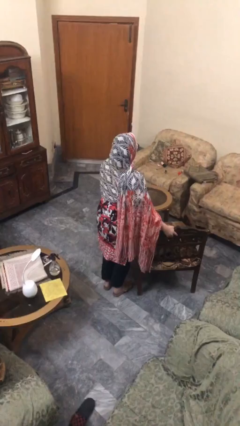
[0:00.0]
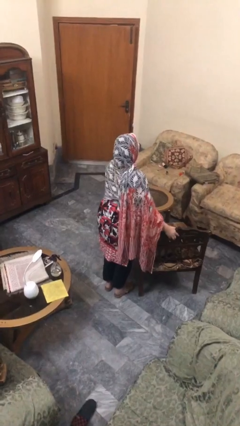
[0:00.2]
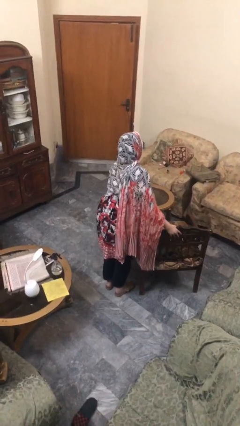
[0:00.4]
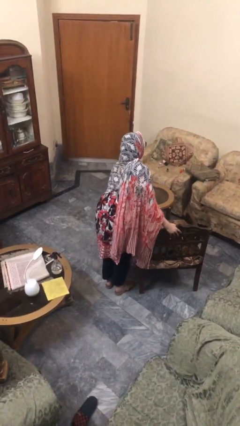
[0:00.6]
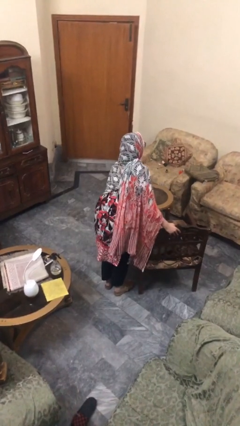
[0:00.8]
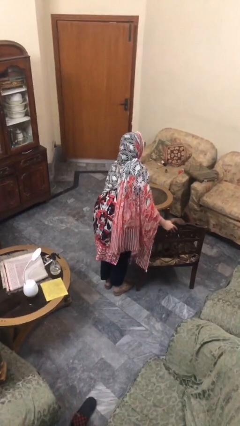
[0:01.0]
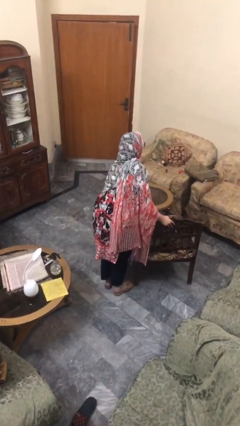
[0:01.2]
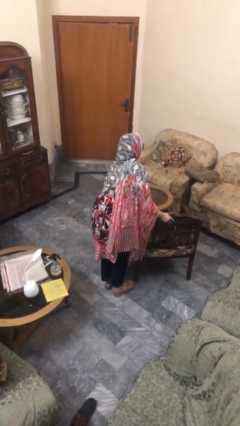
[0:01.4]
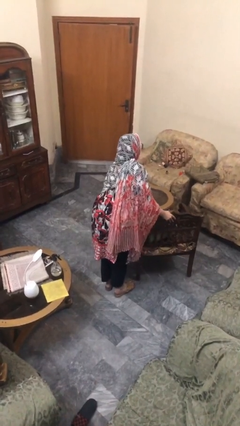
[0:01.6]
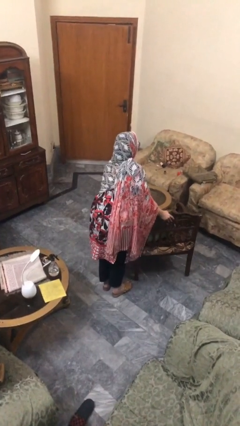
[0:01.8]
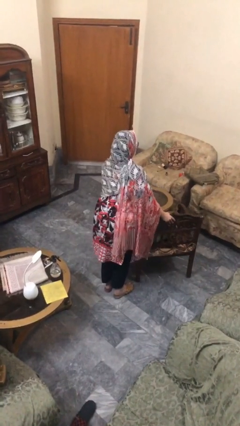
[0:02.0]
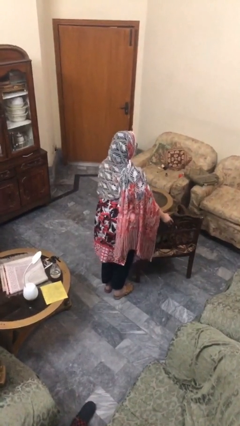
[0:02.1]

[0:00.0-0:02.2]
person pushes in chair

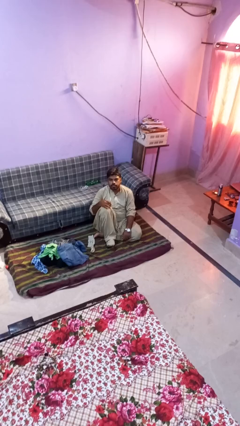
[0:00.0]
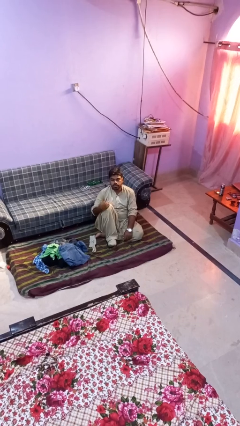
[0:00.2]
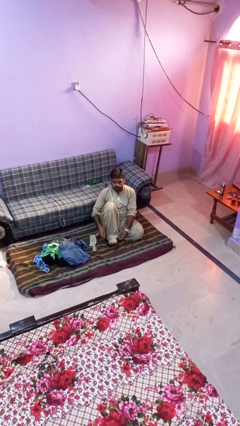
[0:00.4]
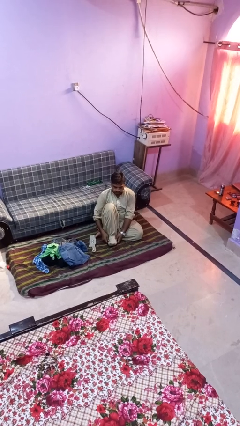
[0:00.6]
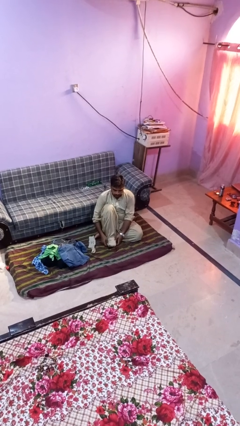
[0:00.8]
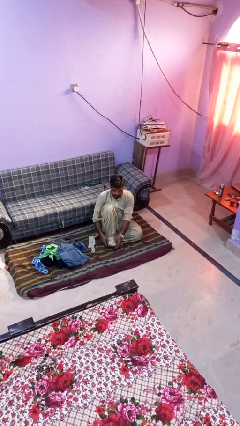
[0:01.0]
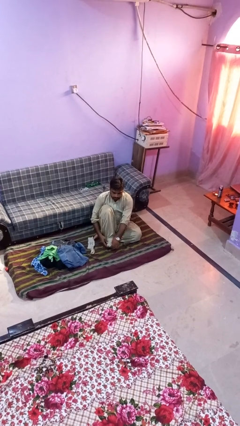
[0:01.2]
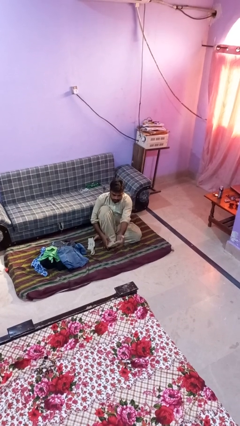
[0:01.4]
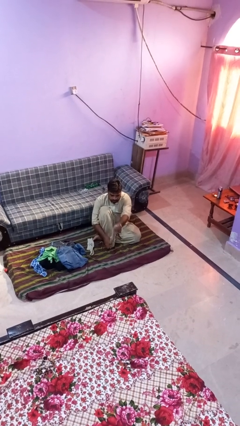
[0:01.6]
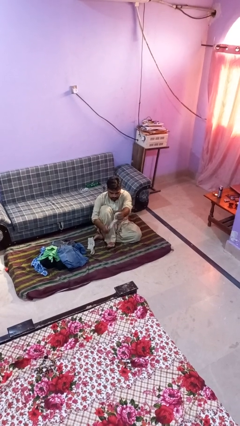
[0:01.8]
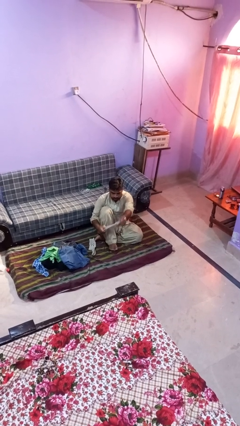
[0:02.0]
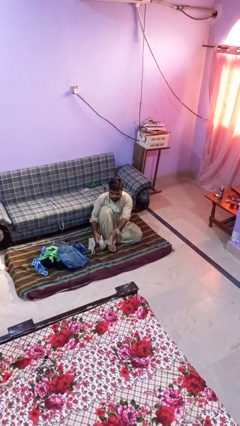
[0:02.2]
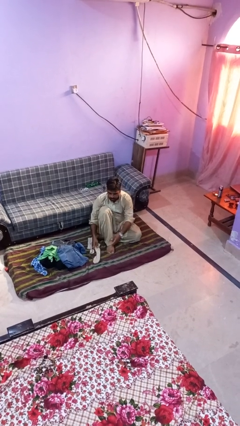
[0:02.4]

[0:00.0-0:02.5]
person takes off socks

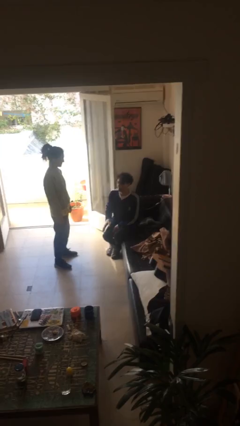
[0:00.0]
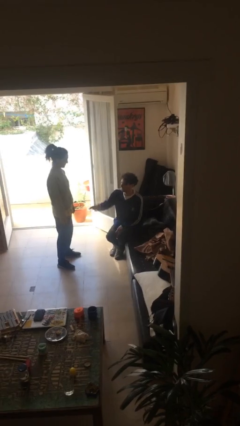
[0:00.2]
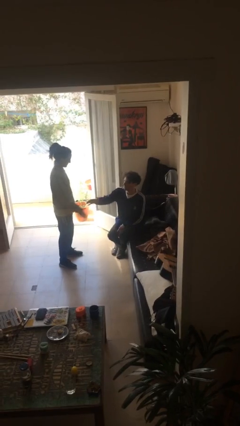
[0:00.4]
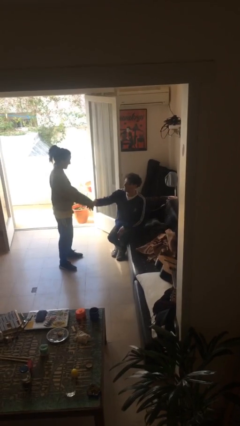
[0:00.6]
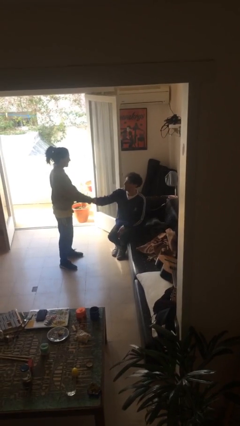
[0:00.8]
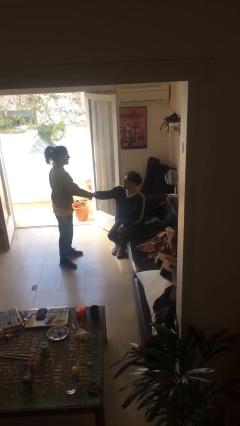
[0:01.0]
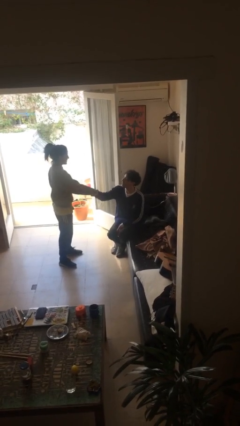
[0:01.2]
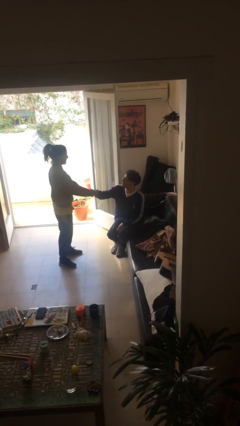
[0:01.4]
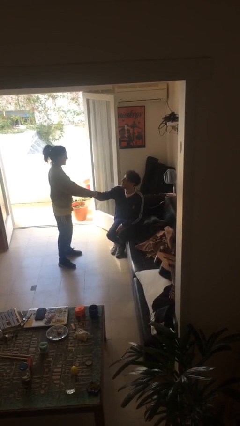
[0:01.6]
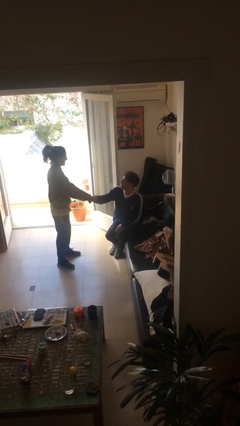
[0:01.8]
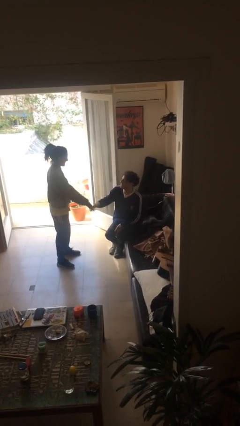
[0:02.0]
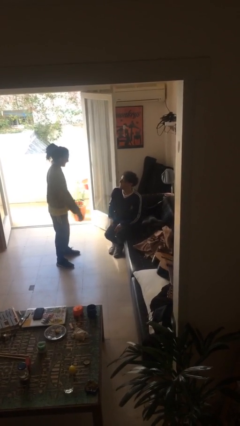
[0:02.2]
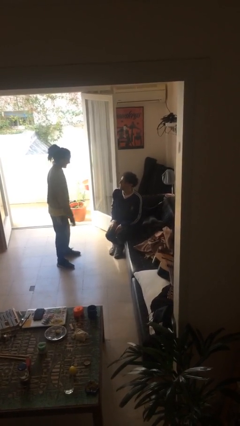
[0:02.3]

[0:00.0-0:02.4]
person shakes hand

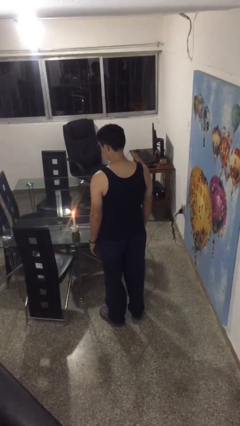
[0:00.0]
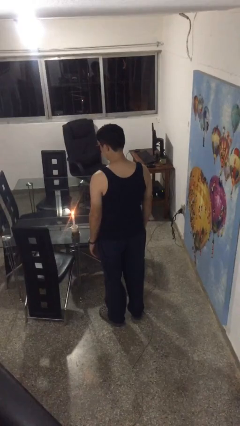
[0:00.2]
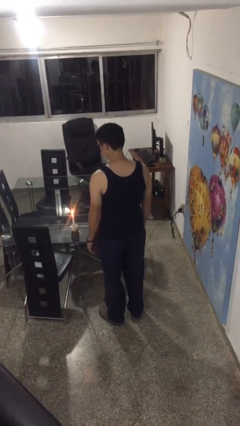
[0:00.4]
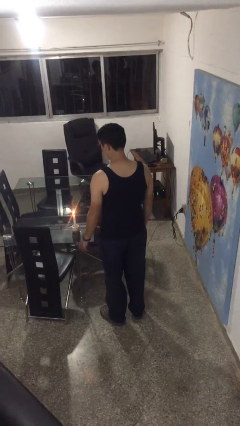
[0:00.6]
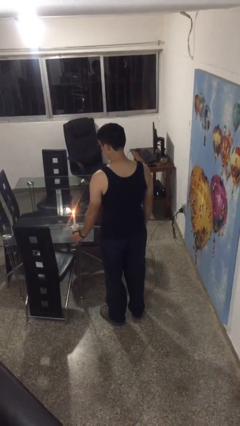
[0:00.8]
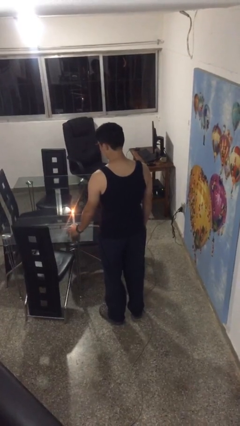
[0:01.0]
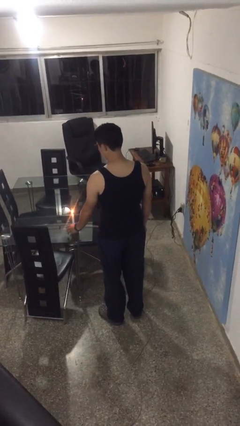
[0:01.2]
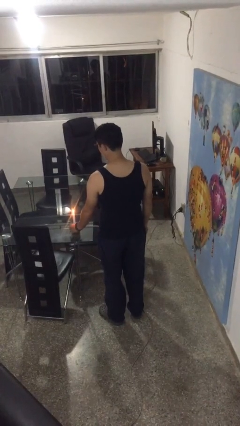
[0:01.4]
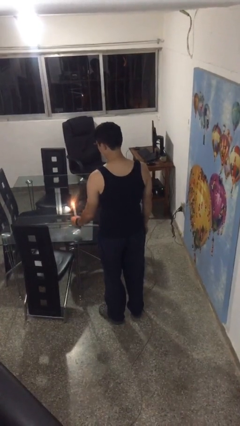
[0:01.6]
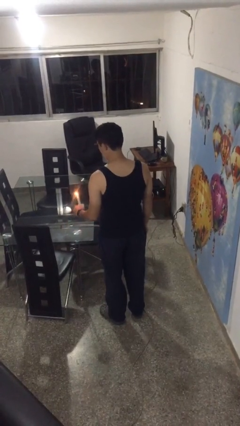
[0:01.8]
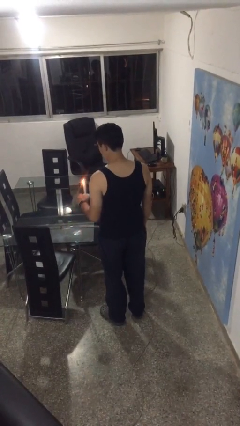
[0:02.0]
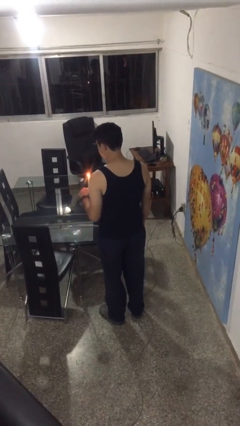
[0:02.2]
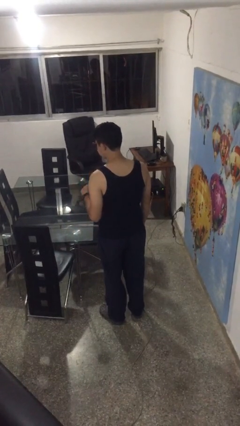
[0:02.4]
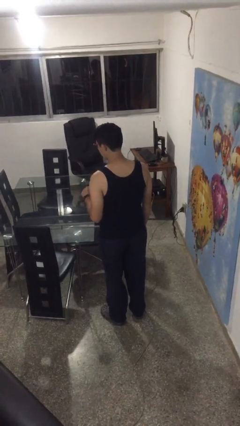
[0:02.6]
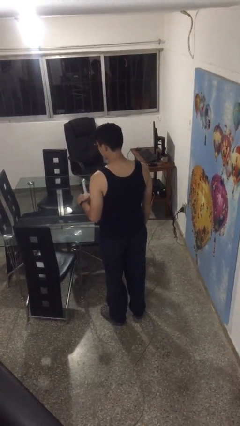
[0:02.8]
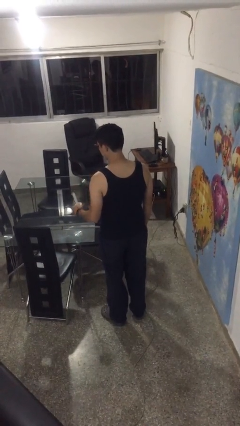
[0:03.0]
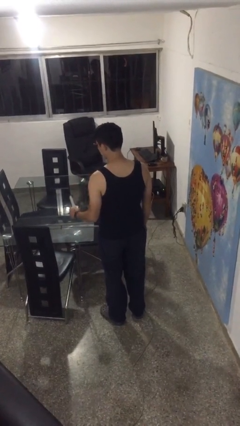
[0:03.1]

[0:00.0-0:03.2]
person extinguishes candle

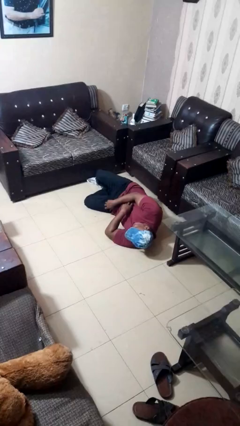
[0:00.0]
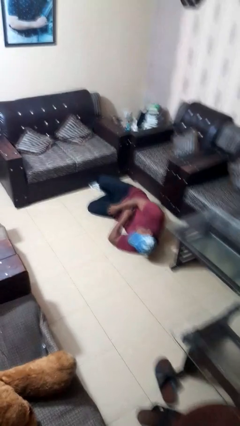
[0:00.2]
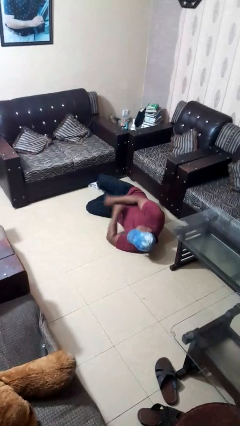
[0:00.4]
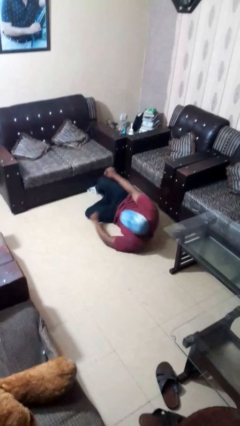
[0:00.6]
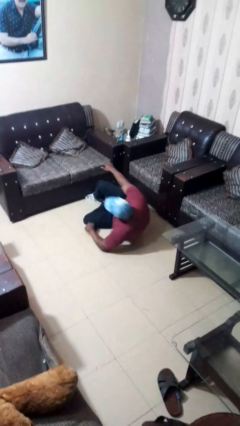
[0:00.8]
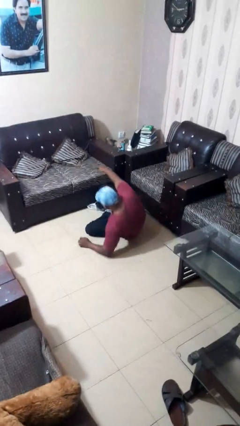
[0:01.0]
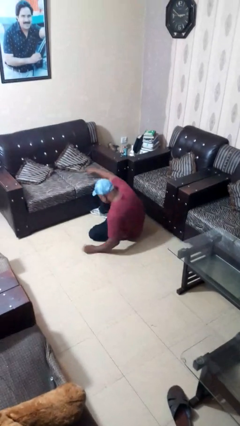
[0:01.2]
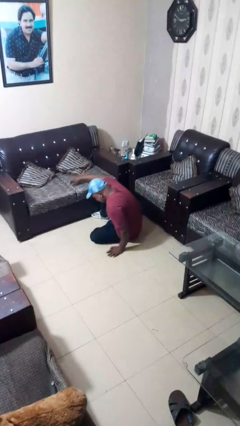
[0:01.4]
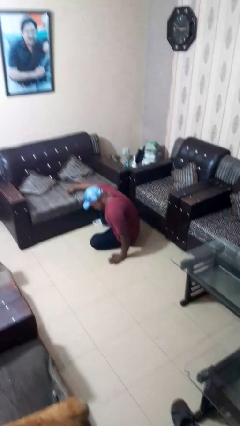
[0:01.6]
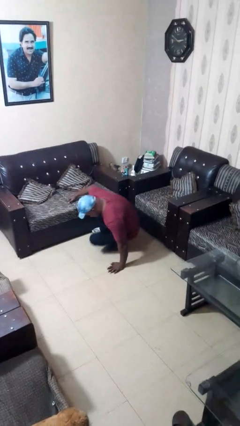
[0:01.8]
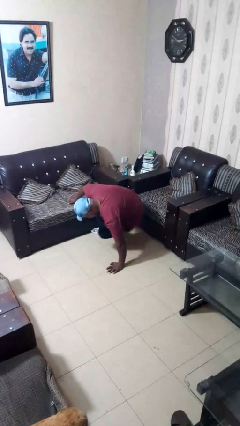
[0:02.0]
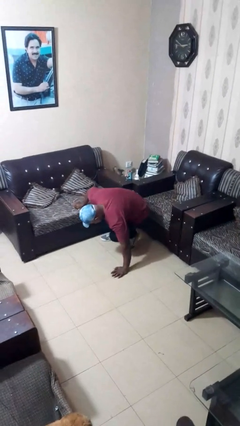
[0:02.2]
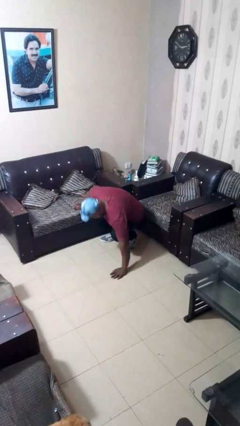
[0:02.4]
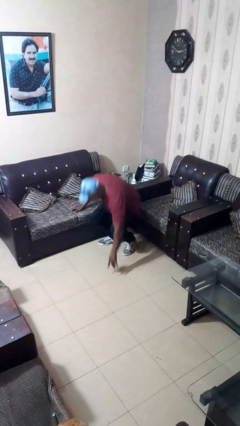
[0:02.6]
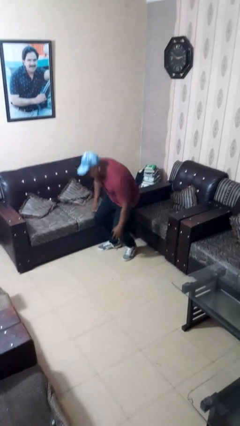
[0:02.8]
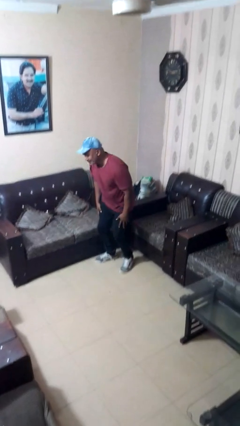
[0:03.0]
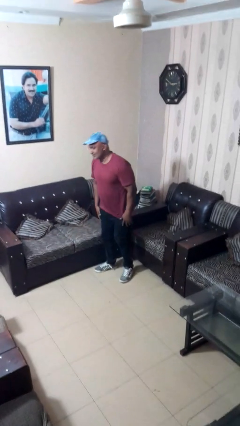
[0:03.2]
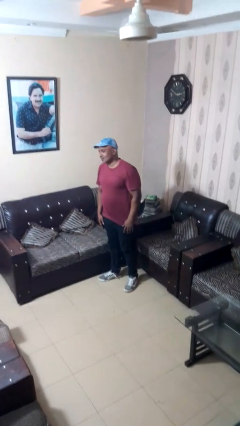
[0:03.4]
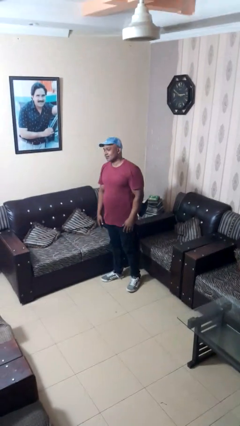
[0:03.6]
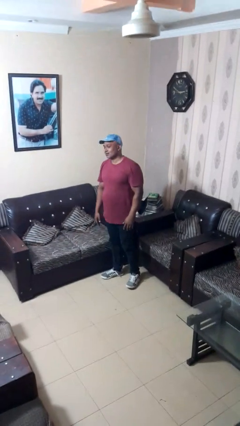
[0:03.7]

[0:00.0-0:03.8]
person stands up from floor

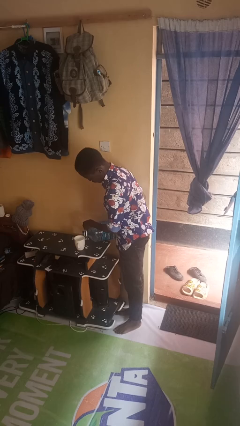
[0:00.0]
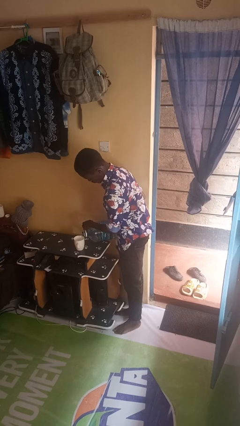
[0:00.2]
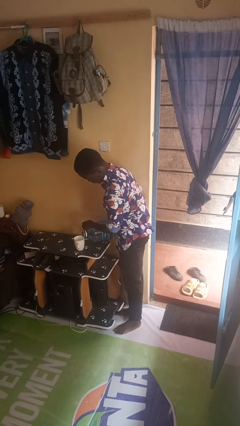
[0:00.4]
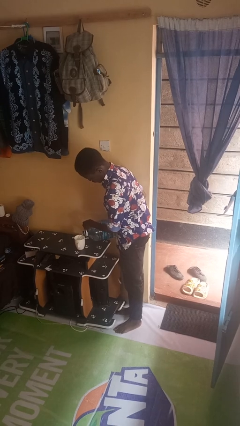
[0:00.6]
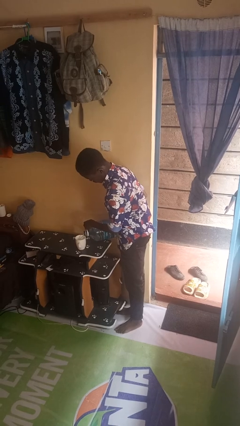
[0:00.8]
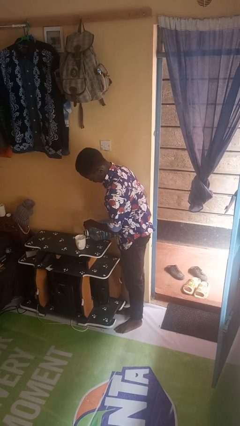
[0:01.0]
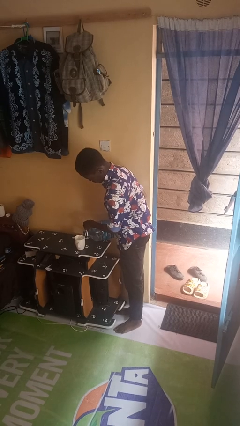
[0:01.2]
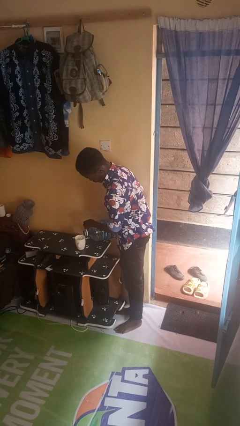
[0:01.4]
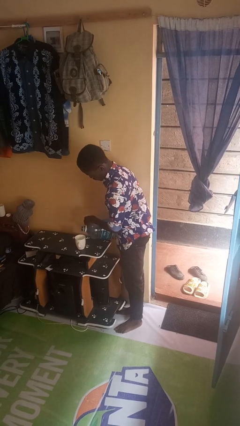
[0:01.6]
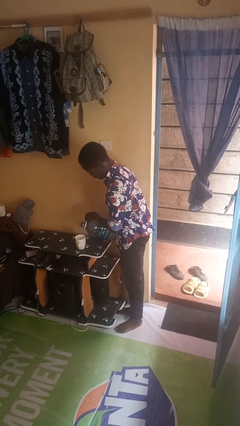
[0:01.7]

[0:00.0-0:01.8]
person pours liquid into cup

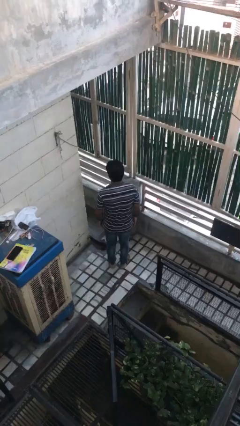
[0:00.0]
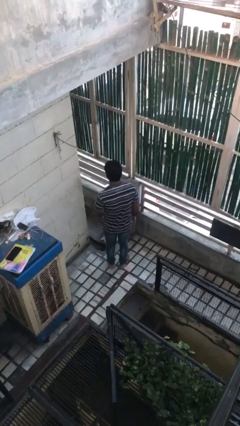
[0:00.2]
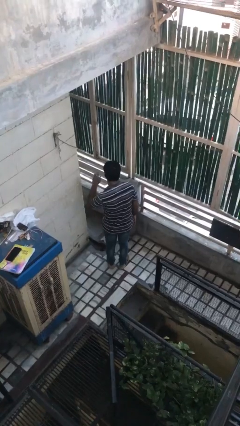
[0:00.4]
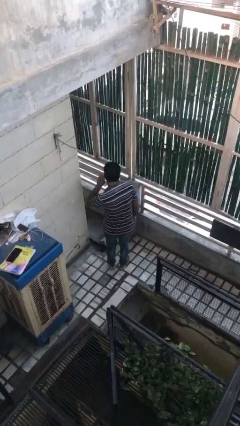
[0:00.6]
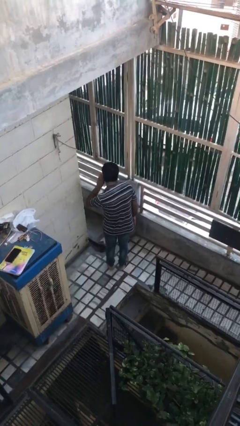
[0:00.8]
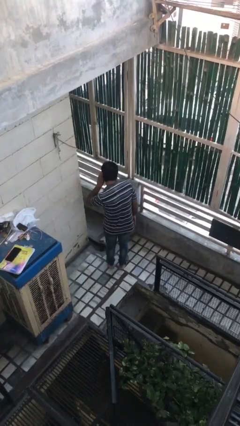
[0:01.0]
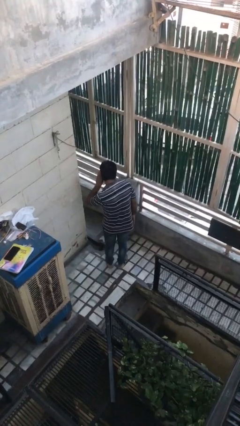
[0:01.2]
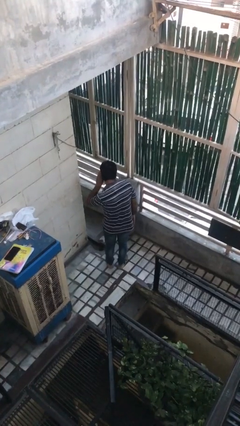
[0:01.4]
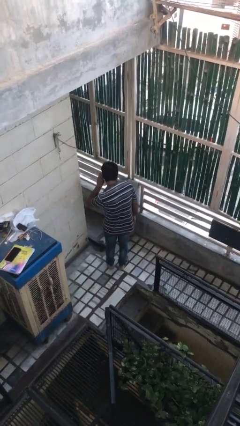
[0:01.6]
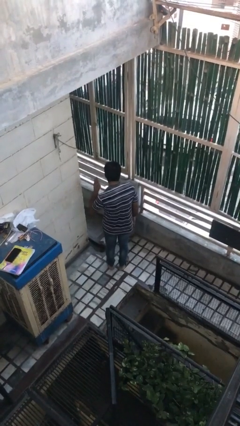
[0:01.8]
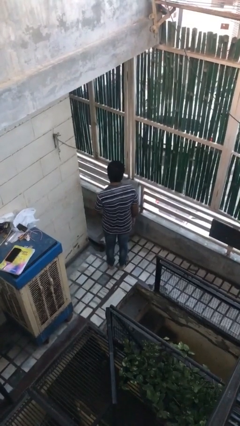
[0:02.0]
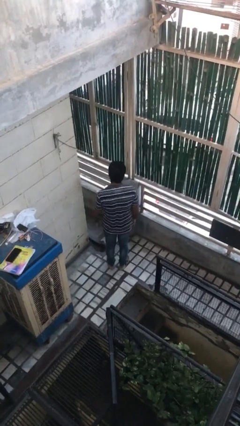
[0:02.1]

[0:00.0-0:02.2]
person gestures listen closely
